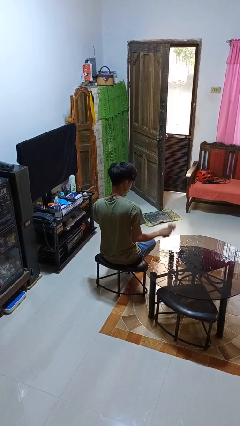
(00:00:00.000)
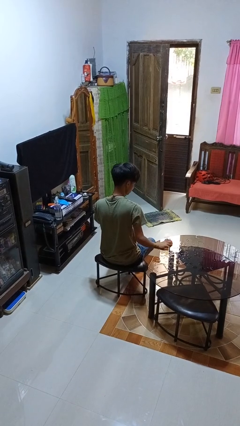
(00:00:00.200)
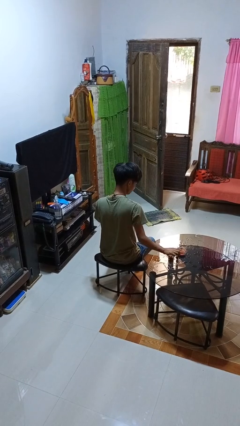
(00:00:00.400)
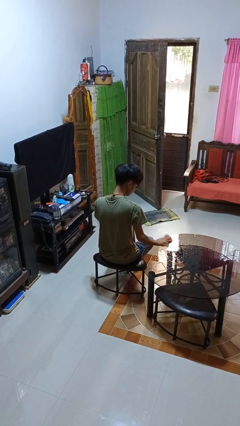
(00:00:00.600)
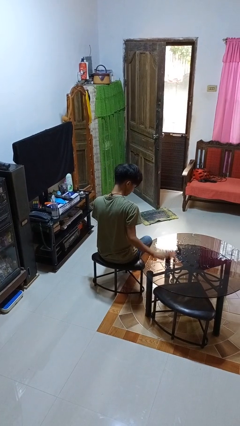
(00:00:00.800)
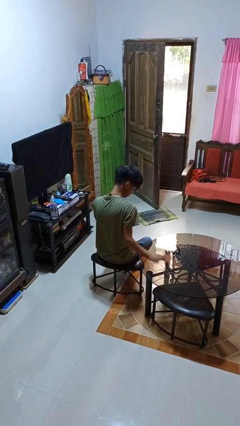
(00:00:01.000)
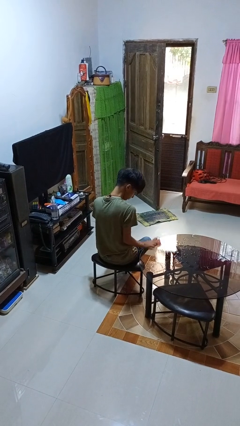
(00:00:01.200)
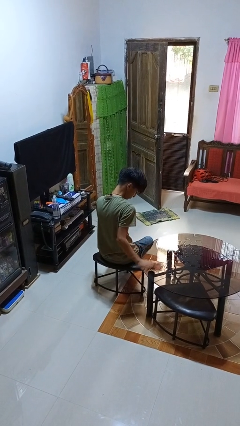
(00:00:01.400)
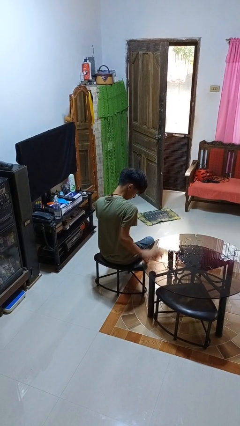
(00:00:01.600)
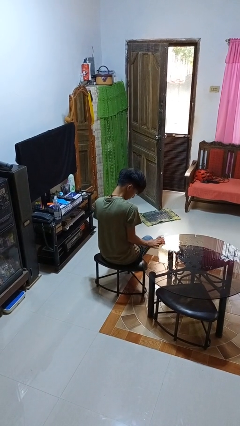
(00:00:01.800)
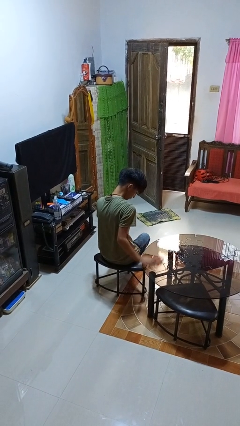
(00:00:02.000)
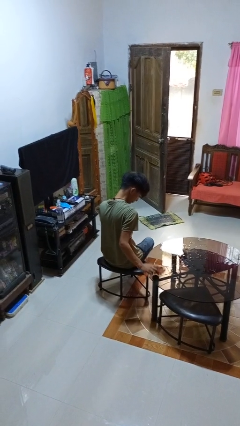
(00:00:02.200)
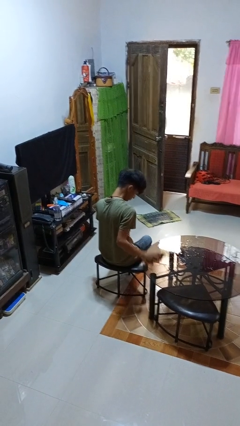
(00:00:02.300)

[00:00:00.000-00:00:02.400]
person cleans table with rag

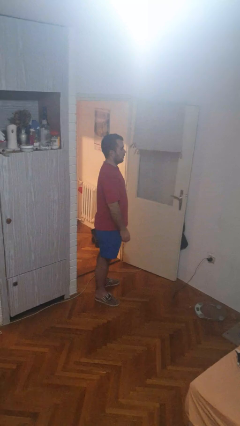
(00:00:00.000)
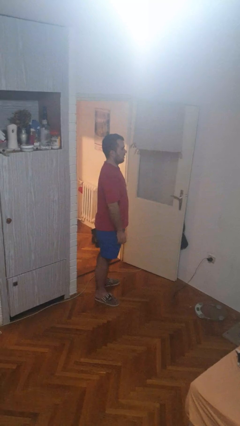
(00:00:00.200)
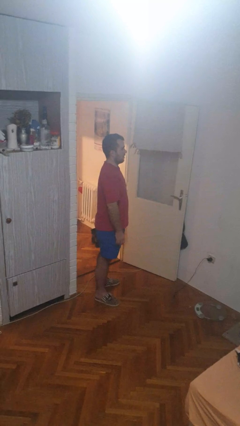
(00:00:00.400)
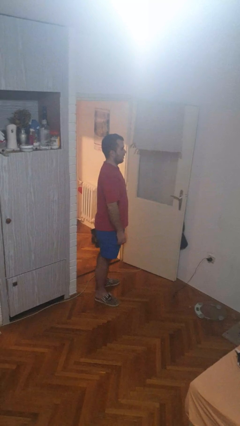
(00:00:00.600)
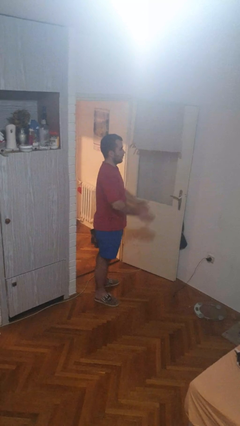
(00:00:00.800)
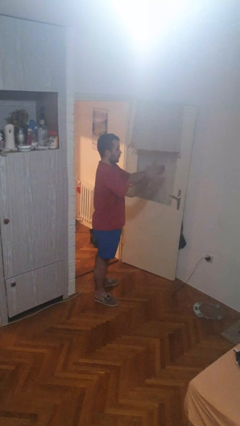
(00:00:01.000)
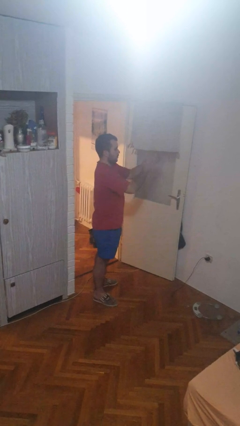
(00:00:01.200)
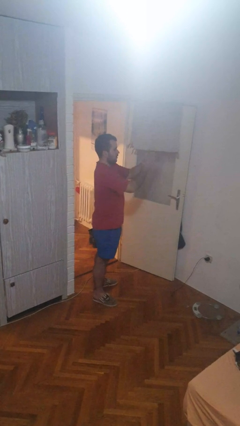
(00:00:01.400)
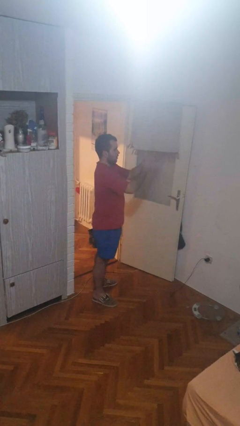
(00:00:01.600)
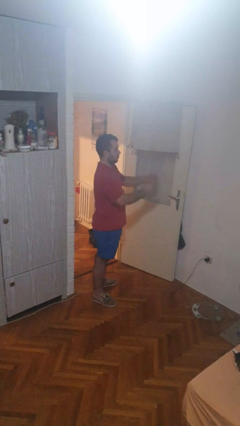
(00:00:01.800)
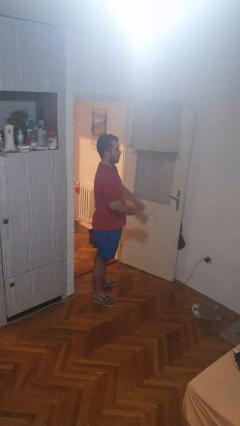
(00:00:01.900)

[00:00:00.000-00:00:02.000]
person claps hands

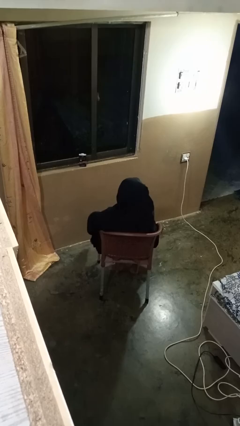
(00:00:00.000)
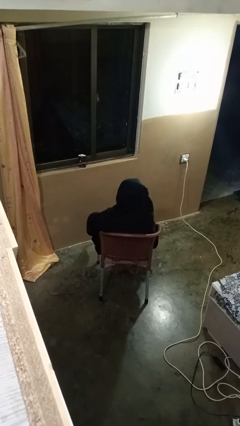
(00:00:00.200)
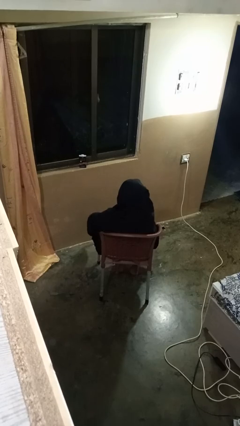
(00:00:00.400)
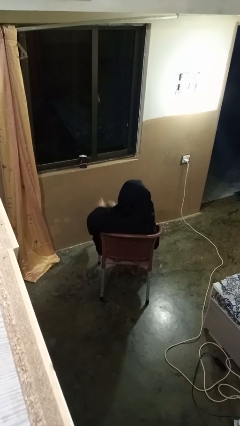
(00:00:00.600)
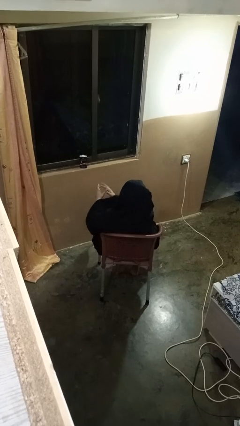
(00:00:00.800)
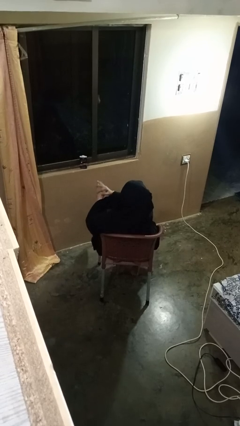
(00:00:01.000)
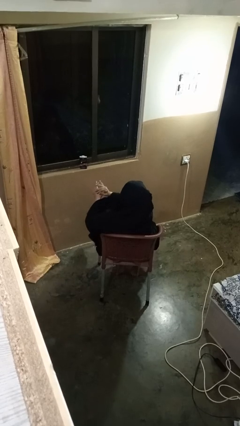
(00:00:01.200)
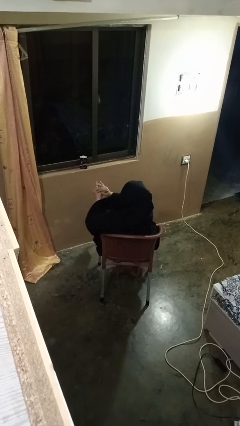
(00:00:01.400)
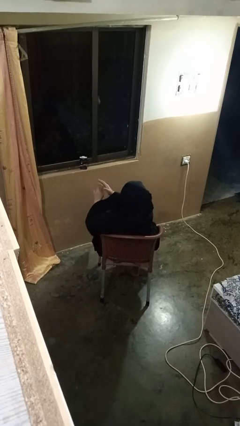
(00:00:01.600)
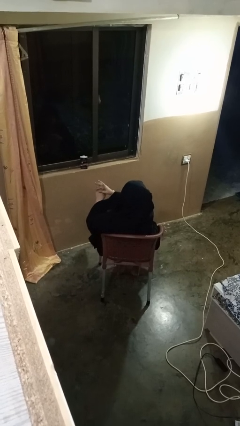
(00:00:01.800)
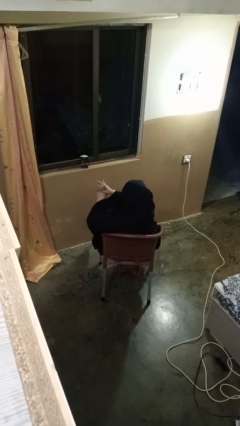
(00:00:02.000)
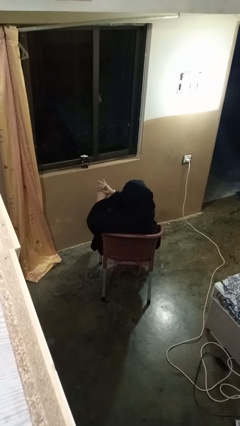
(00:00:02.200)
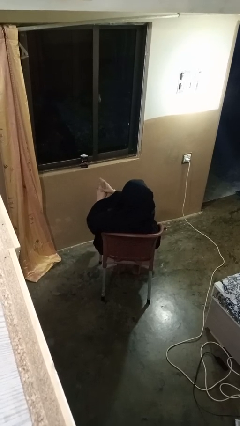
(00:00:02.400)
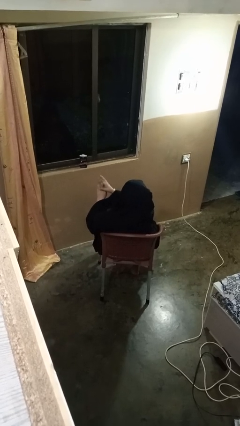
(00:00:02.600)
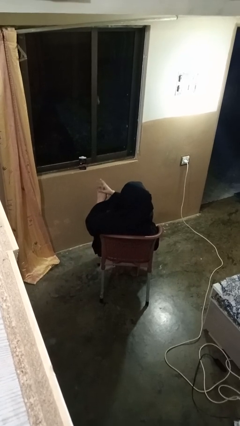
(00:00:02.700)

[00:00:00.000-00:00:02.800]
person cracks knuckles

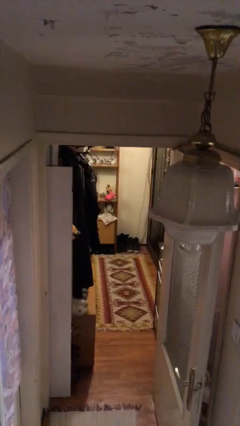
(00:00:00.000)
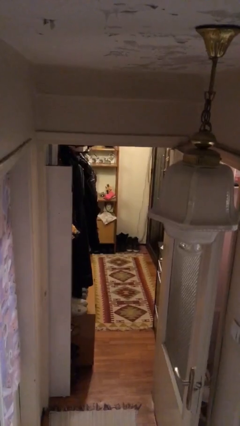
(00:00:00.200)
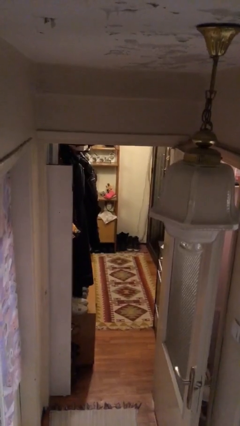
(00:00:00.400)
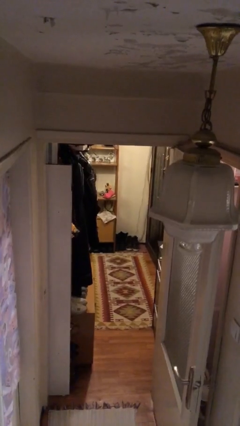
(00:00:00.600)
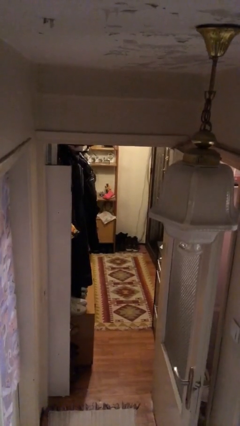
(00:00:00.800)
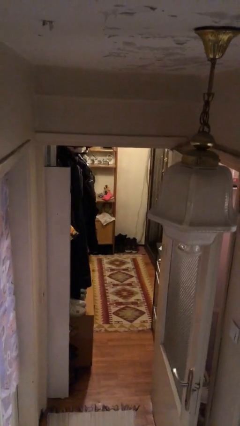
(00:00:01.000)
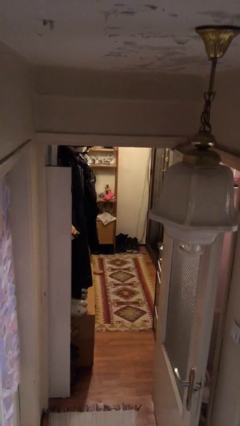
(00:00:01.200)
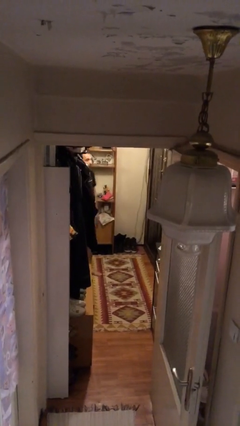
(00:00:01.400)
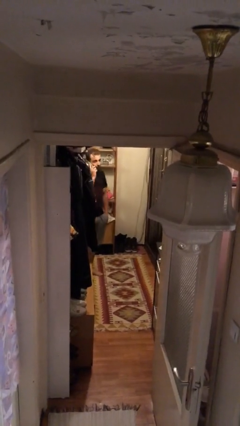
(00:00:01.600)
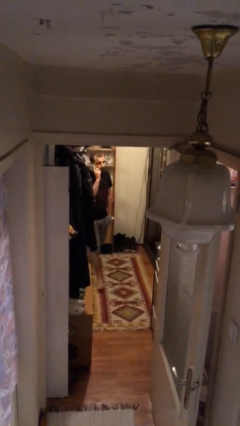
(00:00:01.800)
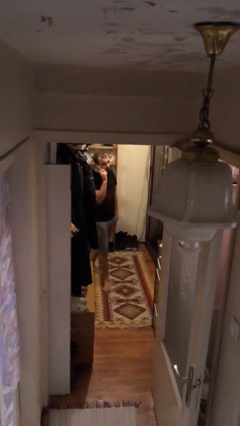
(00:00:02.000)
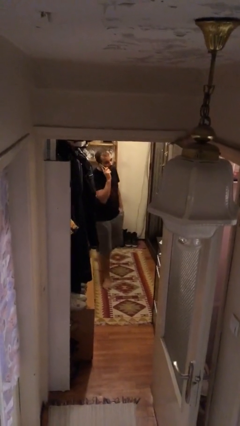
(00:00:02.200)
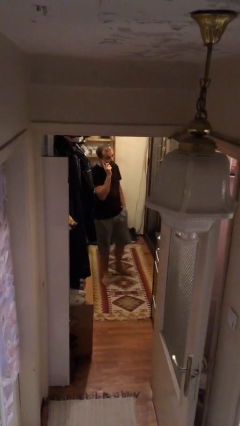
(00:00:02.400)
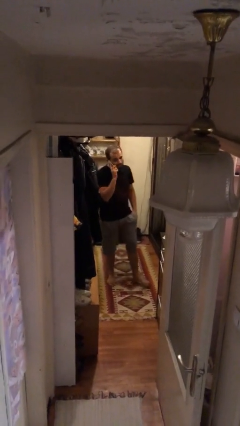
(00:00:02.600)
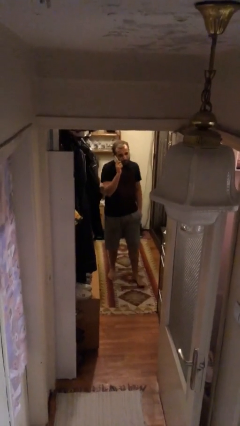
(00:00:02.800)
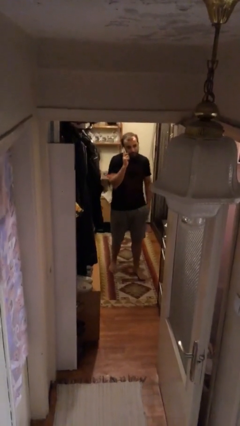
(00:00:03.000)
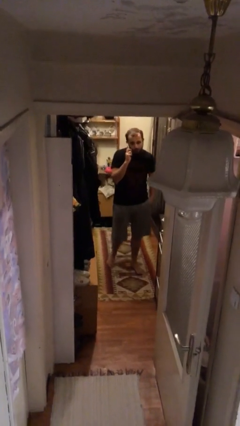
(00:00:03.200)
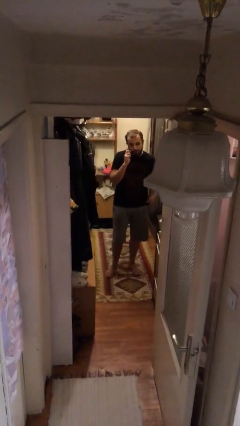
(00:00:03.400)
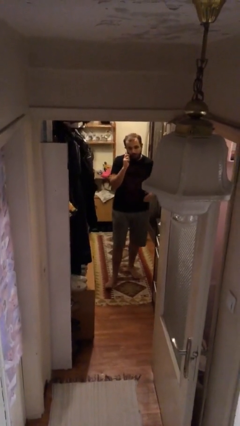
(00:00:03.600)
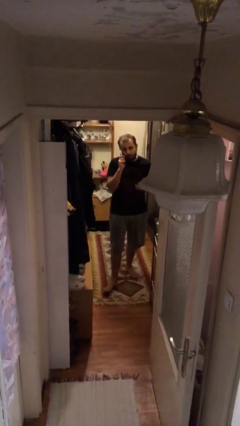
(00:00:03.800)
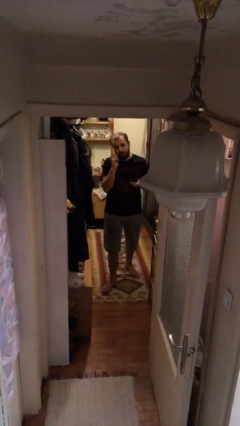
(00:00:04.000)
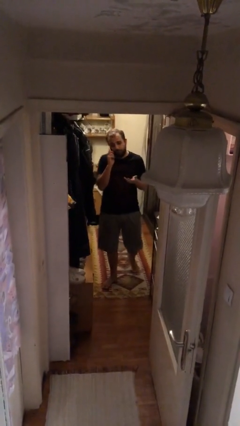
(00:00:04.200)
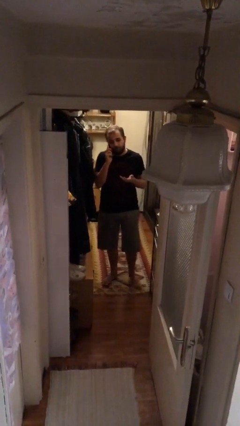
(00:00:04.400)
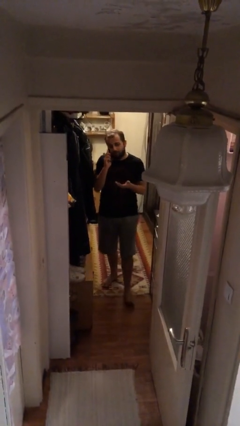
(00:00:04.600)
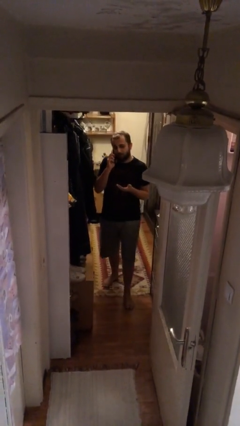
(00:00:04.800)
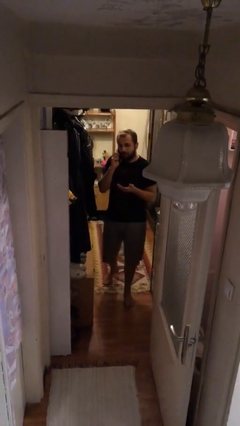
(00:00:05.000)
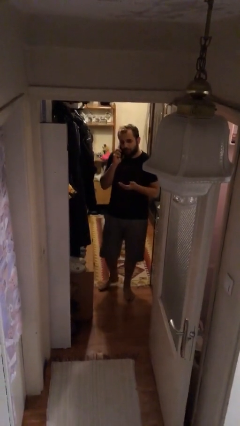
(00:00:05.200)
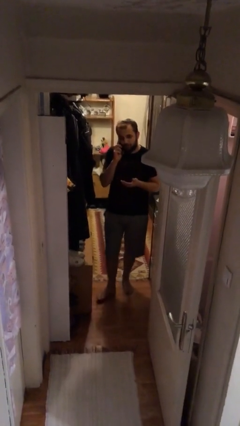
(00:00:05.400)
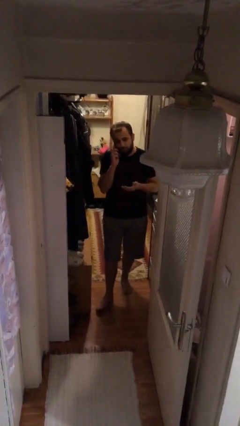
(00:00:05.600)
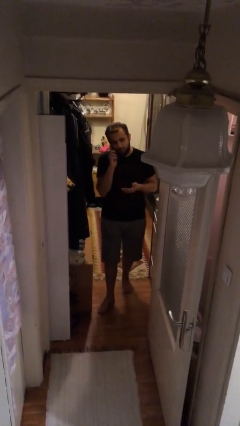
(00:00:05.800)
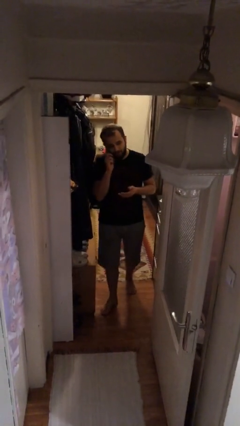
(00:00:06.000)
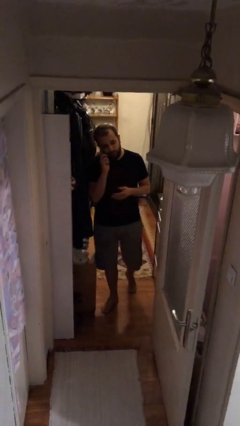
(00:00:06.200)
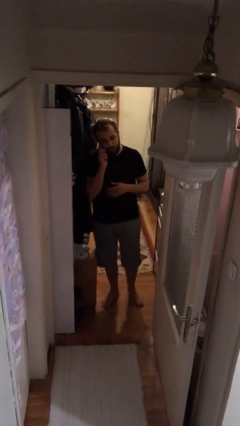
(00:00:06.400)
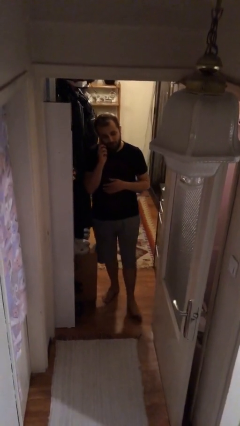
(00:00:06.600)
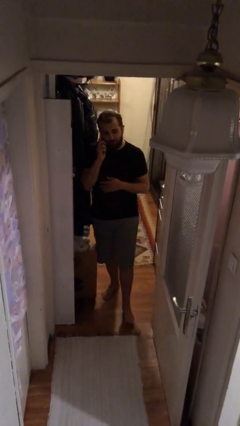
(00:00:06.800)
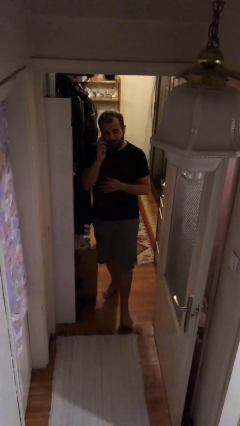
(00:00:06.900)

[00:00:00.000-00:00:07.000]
person enters scene through structure

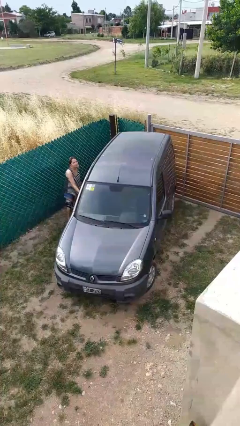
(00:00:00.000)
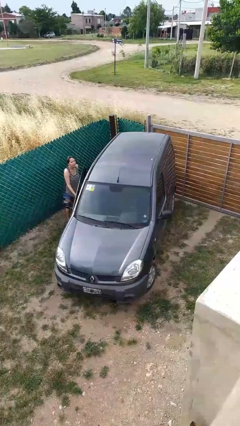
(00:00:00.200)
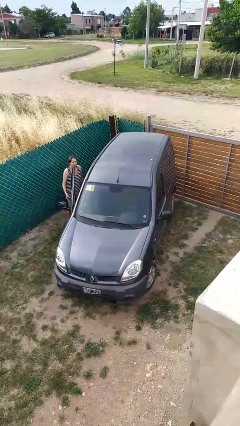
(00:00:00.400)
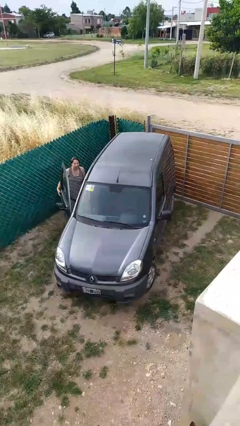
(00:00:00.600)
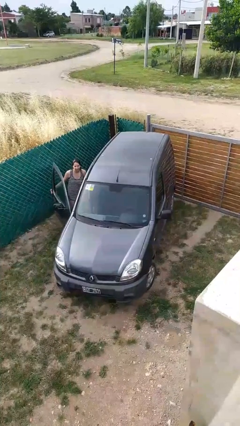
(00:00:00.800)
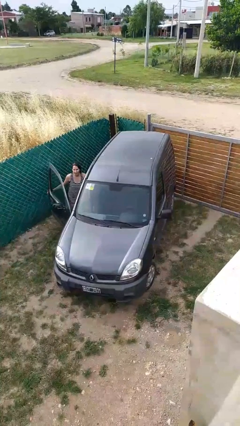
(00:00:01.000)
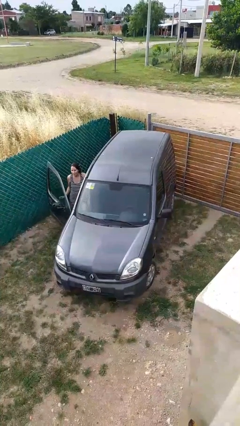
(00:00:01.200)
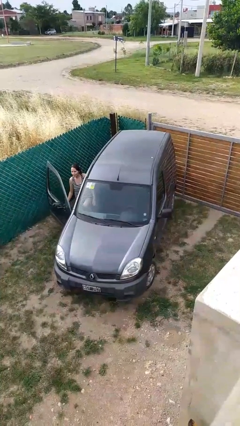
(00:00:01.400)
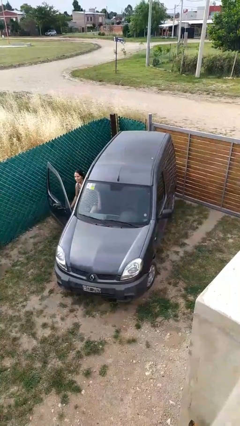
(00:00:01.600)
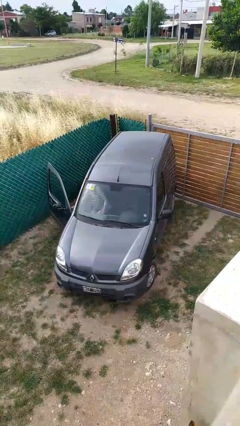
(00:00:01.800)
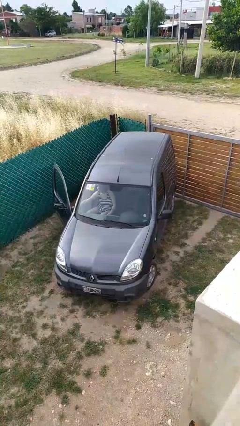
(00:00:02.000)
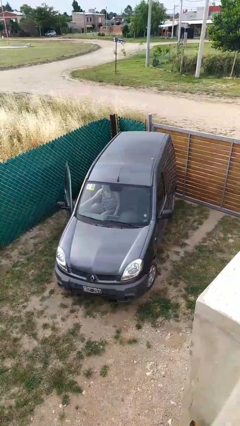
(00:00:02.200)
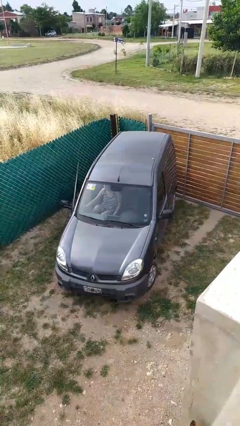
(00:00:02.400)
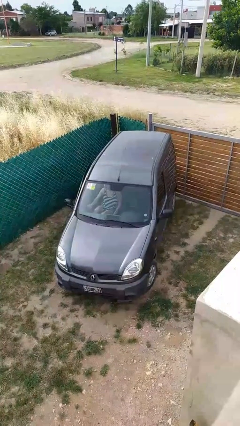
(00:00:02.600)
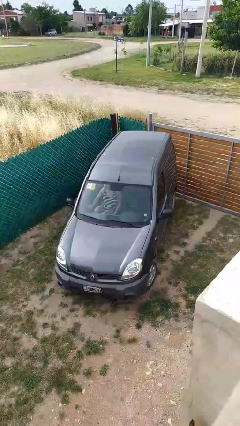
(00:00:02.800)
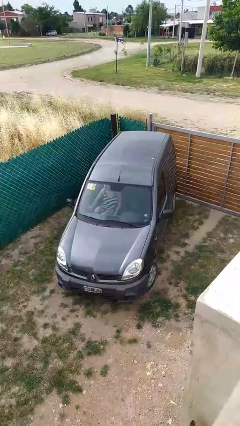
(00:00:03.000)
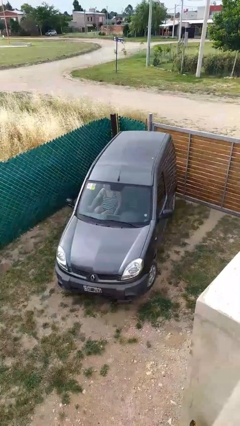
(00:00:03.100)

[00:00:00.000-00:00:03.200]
car picks up person
